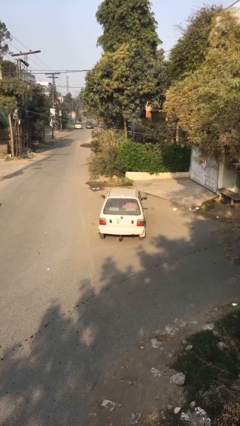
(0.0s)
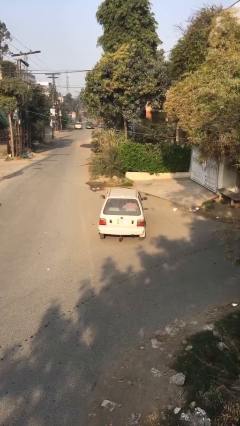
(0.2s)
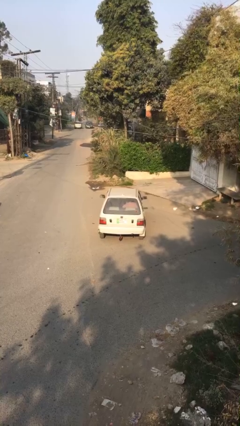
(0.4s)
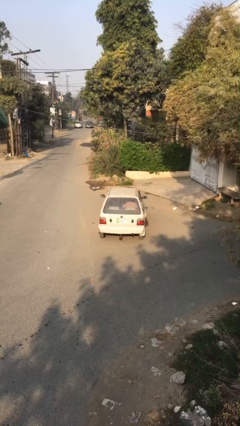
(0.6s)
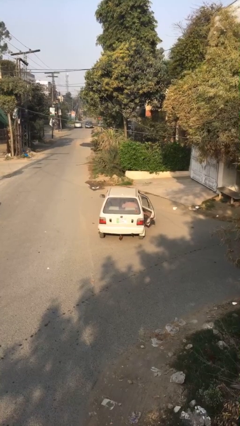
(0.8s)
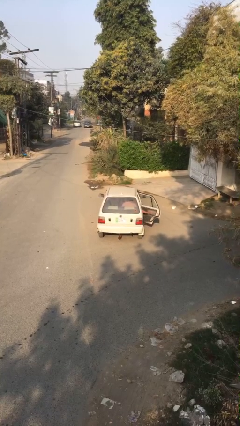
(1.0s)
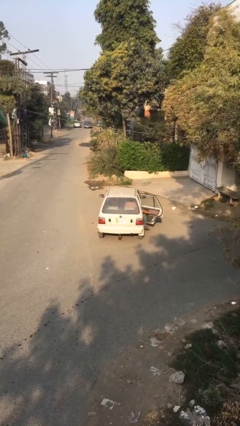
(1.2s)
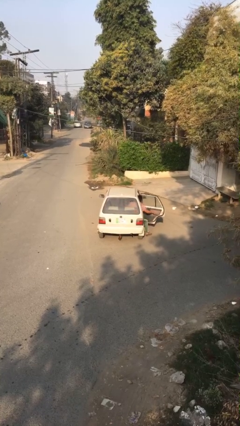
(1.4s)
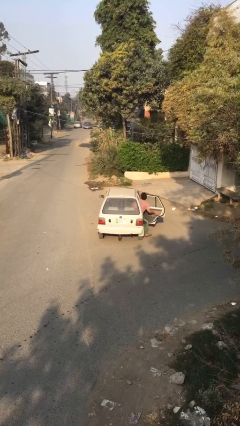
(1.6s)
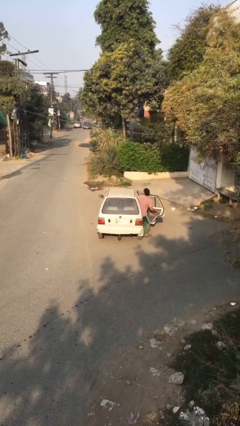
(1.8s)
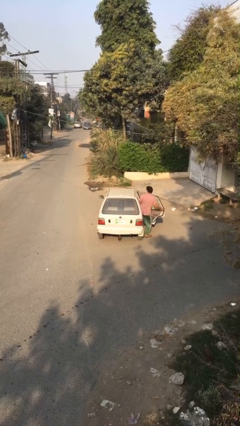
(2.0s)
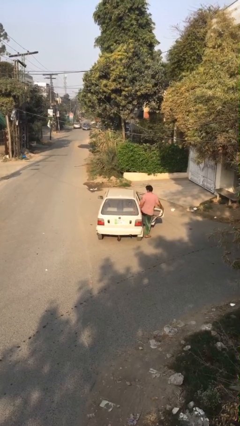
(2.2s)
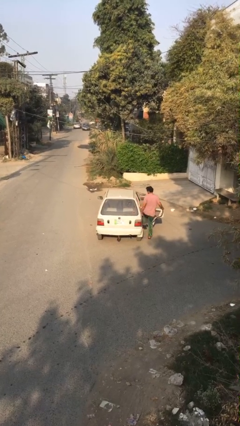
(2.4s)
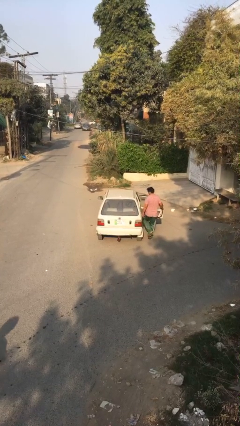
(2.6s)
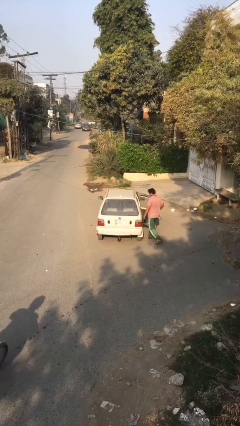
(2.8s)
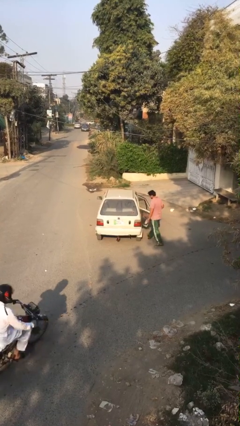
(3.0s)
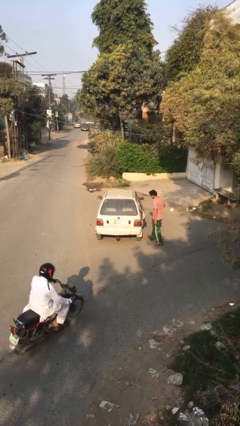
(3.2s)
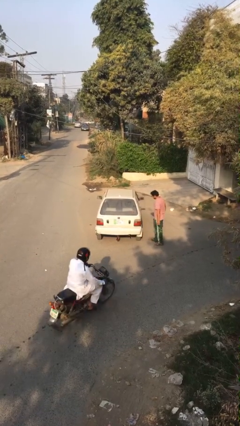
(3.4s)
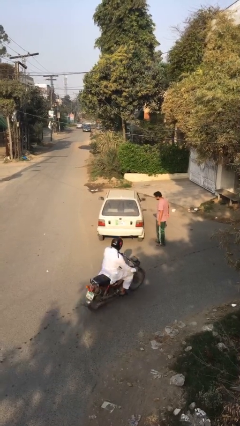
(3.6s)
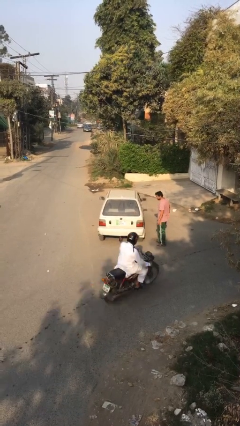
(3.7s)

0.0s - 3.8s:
car drops off person

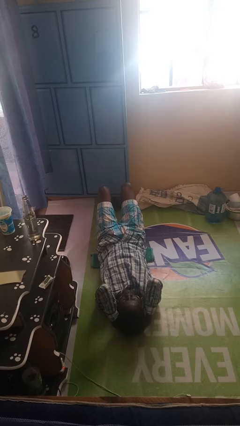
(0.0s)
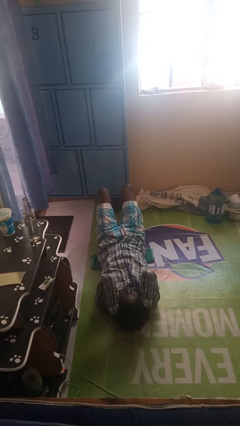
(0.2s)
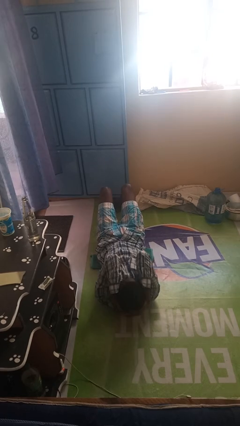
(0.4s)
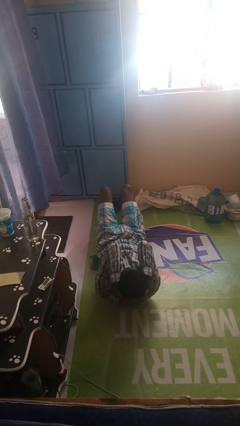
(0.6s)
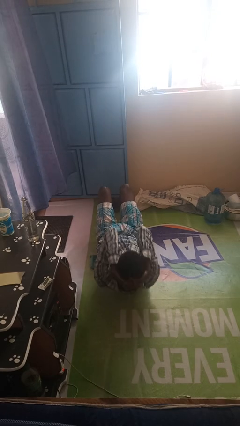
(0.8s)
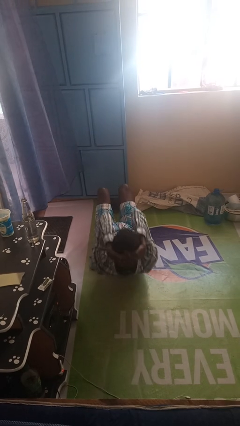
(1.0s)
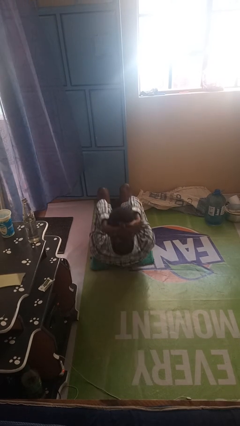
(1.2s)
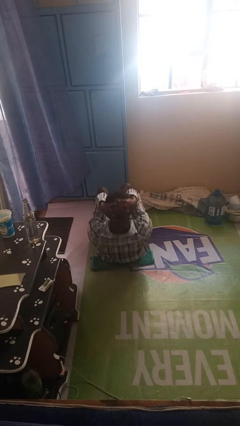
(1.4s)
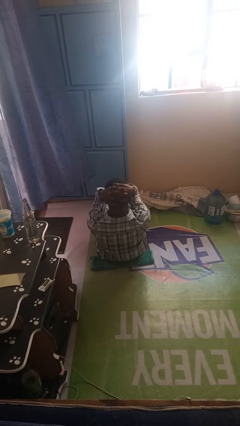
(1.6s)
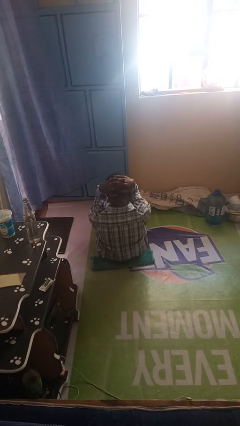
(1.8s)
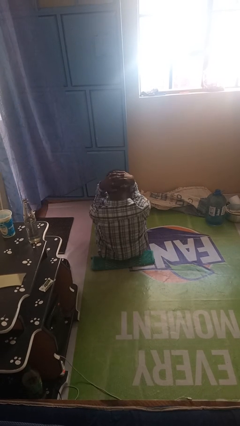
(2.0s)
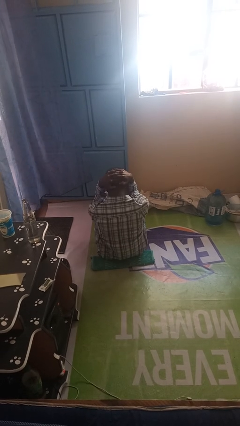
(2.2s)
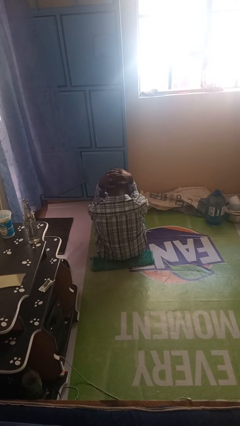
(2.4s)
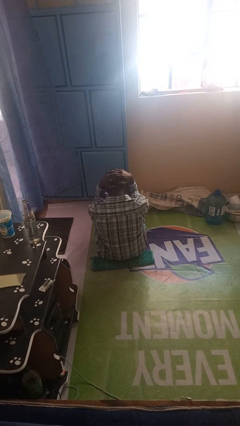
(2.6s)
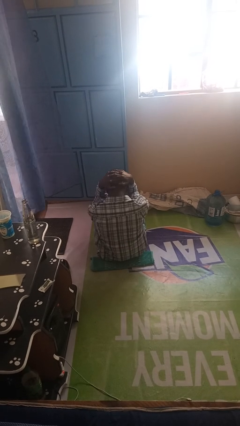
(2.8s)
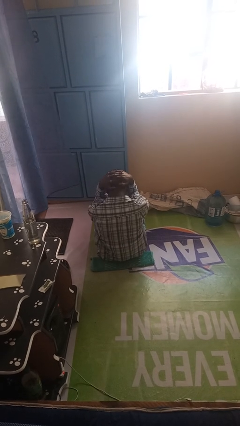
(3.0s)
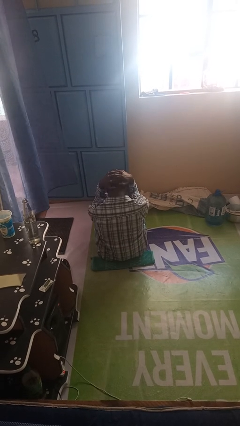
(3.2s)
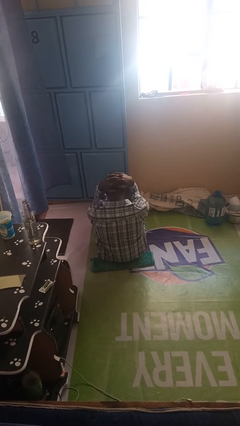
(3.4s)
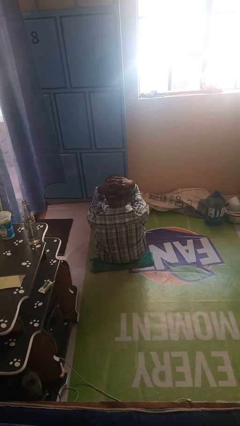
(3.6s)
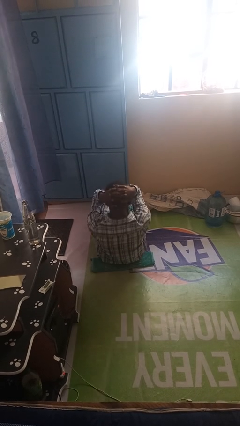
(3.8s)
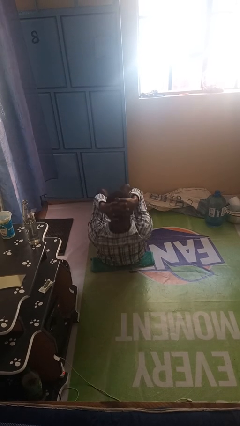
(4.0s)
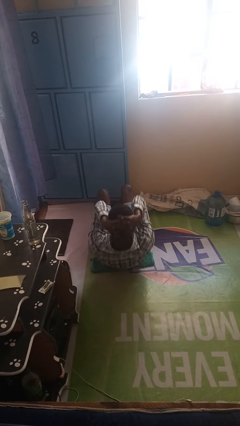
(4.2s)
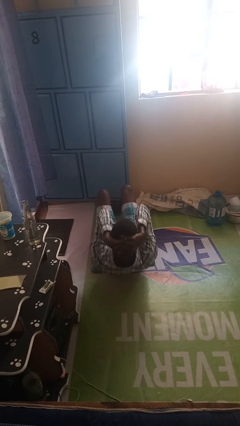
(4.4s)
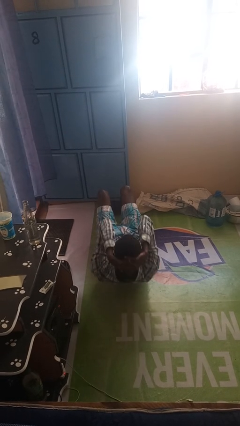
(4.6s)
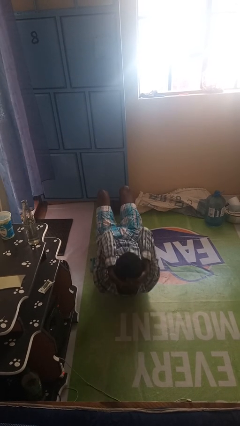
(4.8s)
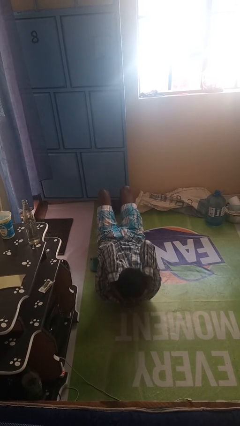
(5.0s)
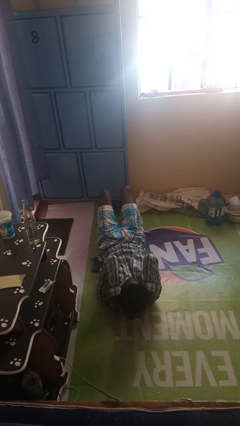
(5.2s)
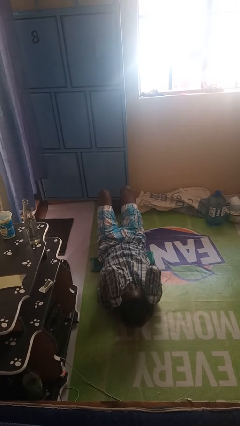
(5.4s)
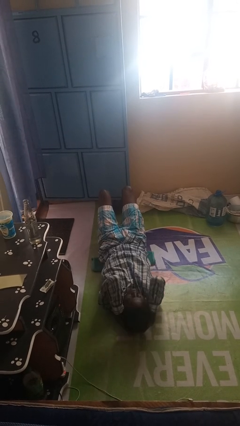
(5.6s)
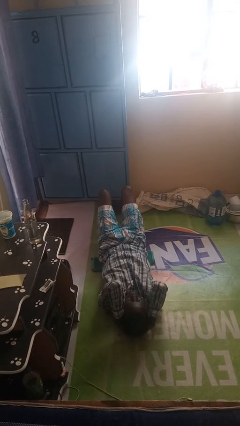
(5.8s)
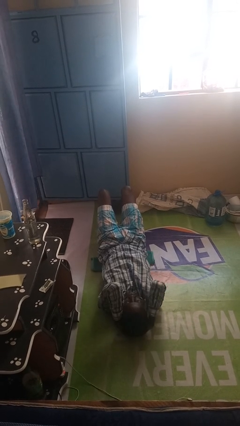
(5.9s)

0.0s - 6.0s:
person exercises with situp

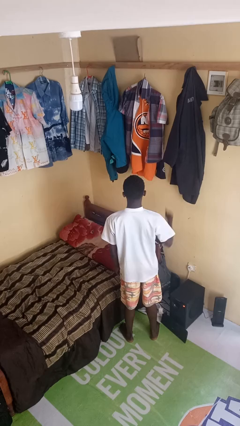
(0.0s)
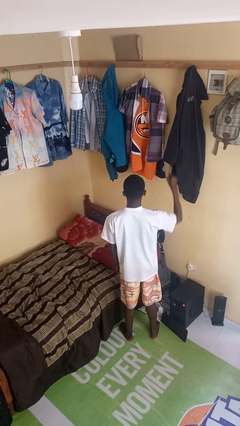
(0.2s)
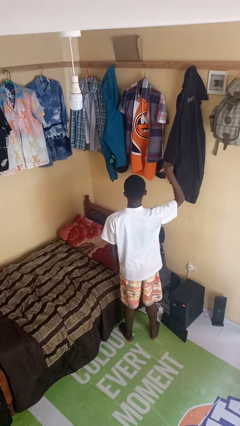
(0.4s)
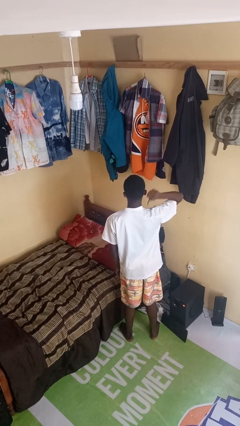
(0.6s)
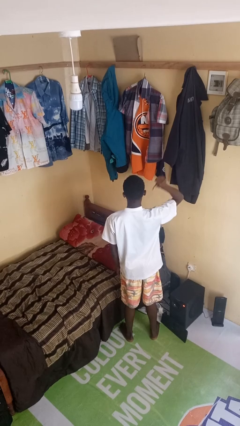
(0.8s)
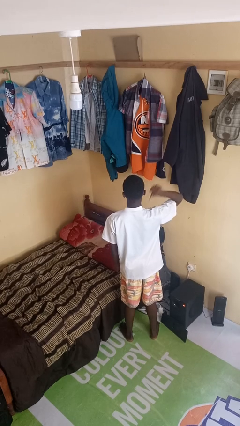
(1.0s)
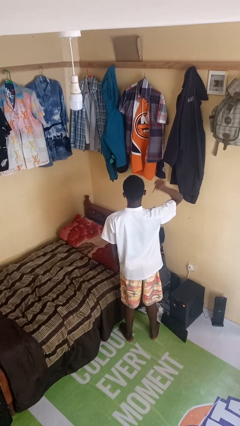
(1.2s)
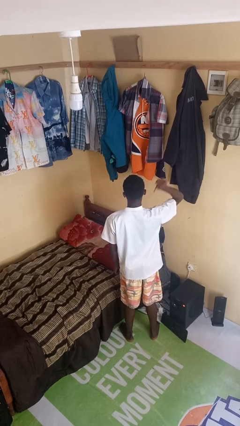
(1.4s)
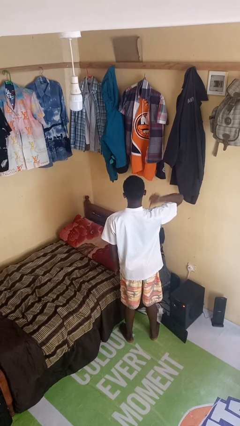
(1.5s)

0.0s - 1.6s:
person gestures behind me

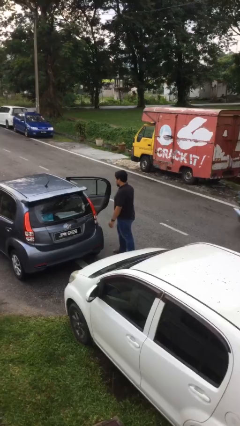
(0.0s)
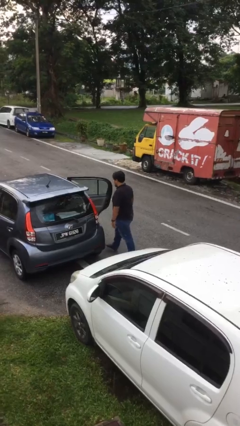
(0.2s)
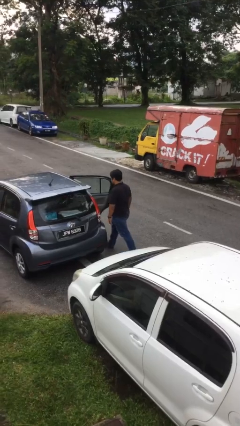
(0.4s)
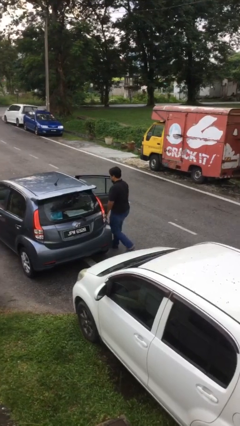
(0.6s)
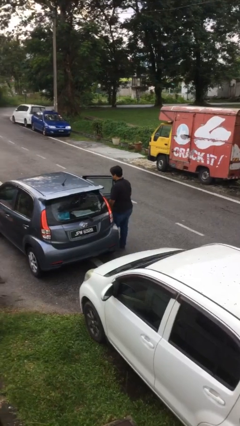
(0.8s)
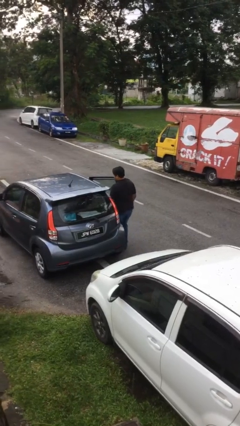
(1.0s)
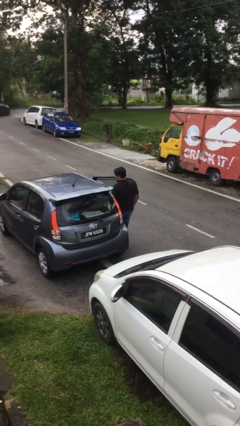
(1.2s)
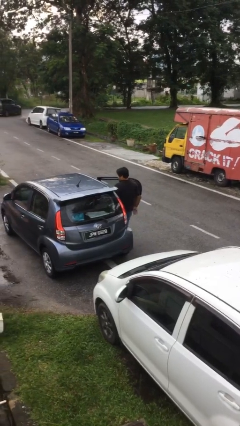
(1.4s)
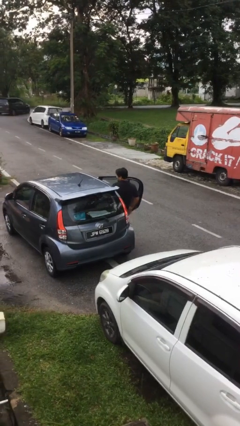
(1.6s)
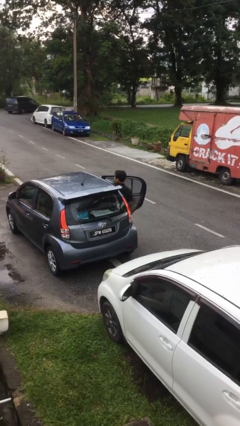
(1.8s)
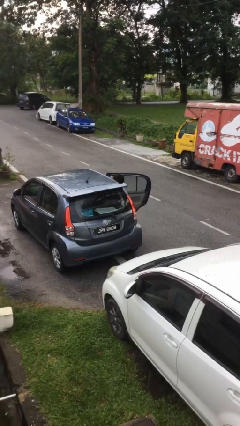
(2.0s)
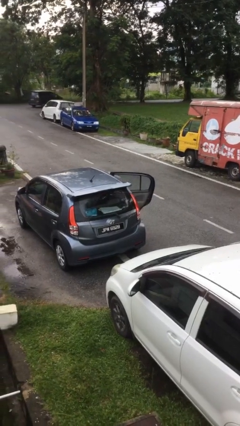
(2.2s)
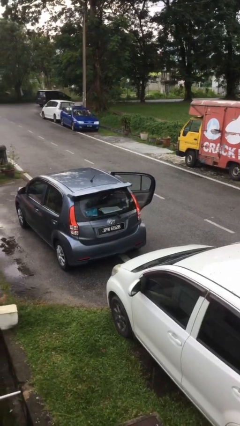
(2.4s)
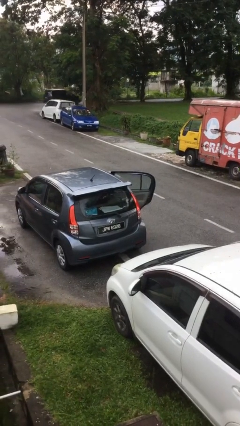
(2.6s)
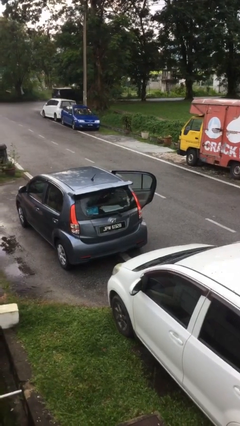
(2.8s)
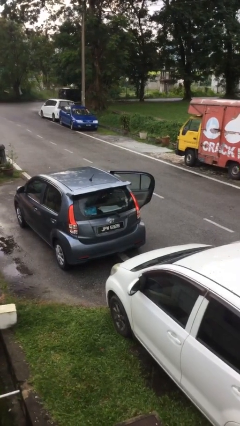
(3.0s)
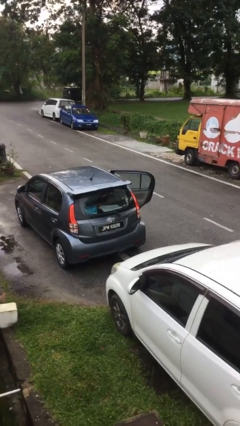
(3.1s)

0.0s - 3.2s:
person enters car

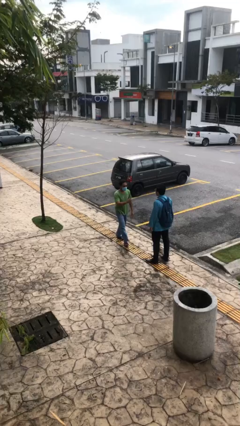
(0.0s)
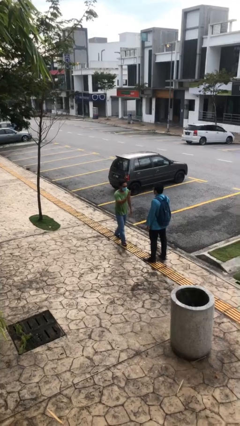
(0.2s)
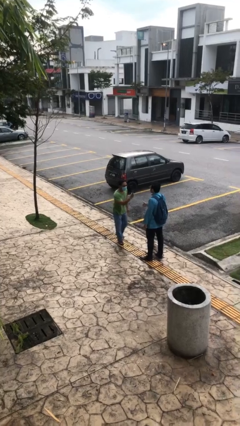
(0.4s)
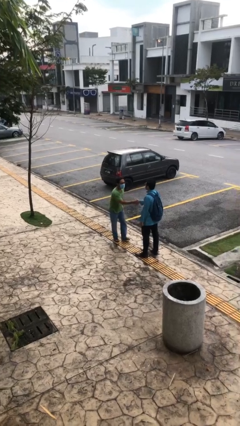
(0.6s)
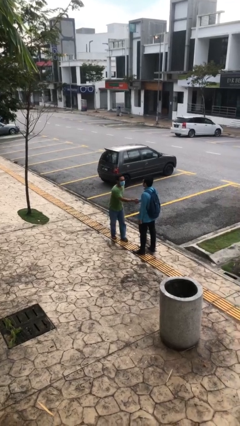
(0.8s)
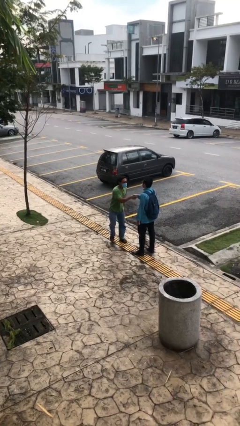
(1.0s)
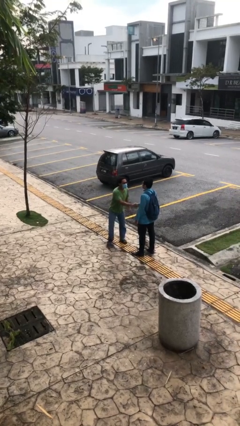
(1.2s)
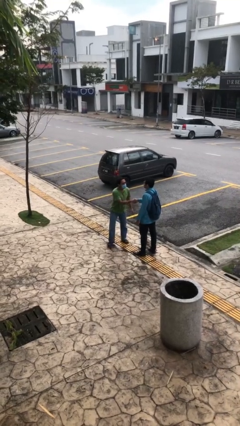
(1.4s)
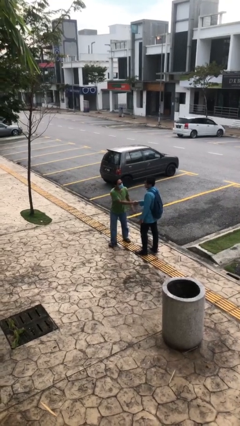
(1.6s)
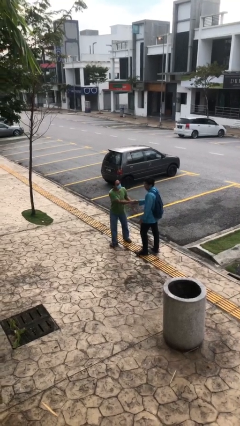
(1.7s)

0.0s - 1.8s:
person shakes hand

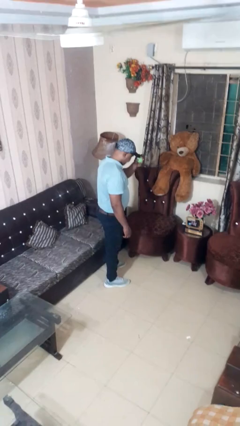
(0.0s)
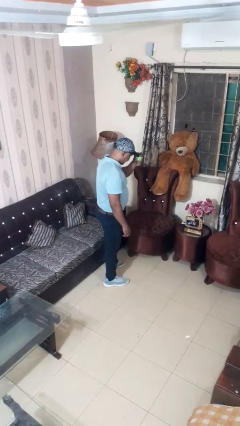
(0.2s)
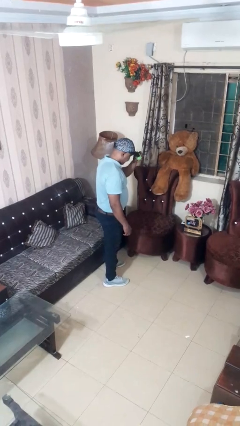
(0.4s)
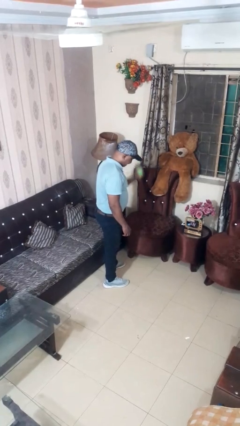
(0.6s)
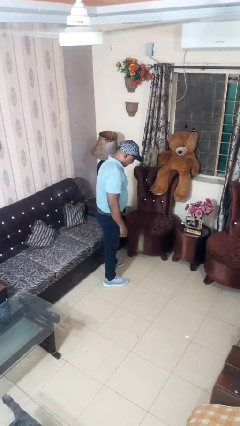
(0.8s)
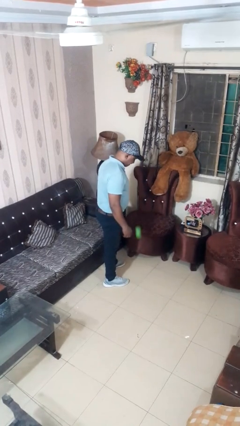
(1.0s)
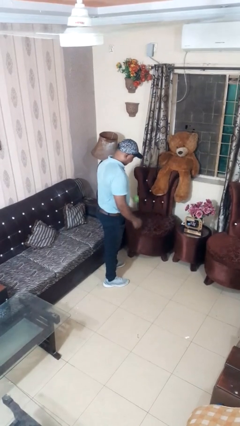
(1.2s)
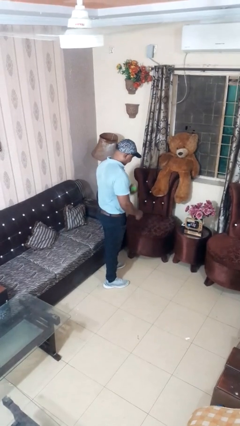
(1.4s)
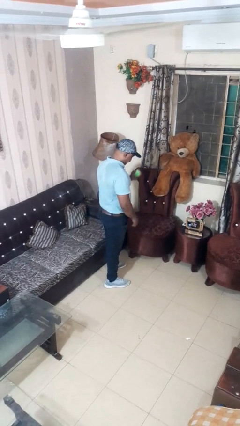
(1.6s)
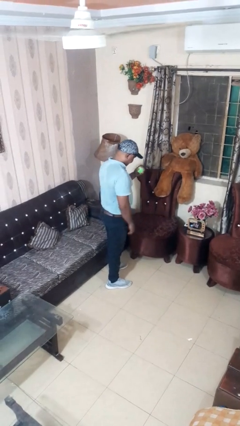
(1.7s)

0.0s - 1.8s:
person bounces ball on floor
